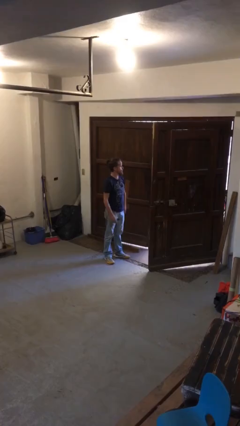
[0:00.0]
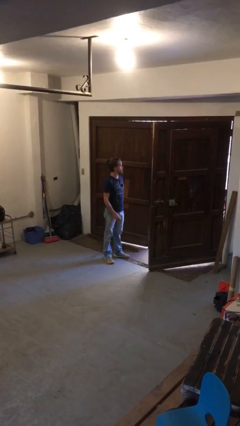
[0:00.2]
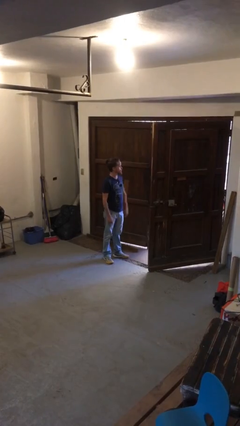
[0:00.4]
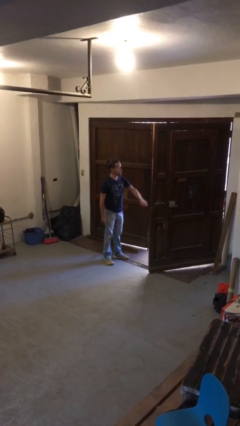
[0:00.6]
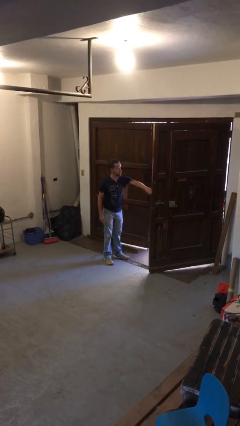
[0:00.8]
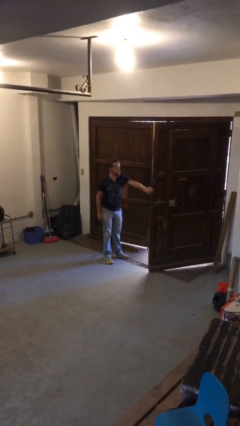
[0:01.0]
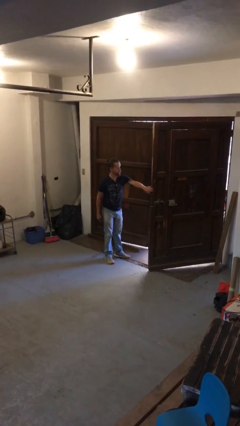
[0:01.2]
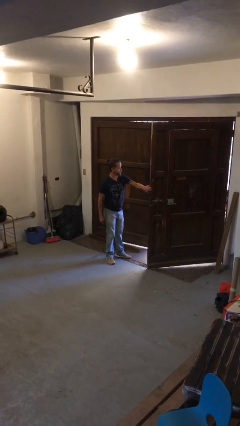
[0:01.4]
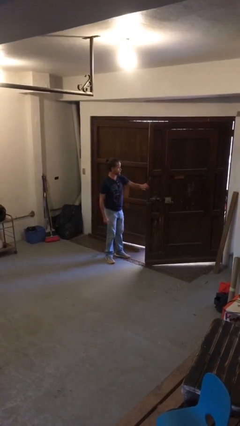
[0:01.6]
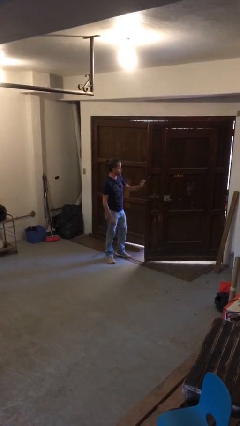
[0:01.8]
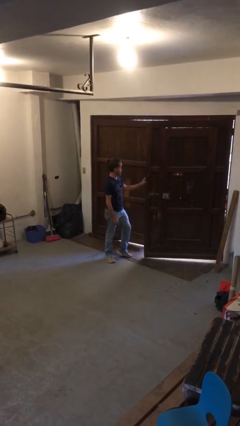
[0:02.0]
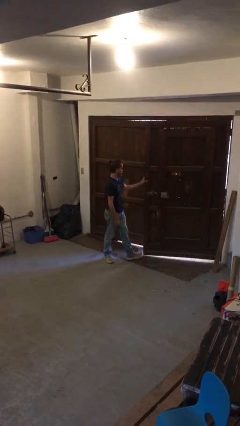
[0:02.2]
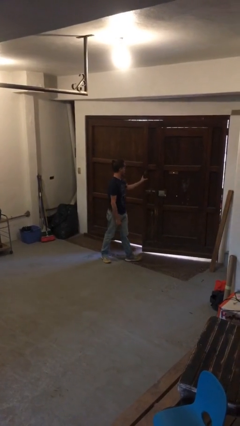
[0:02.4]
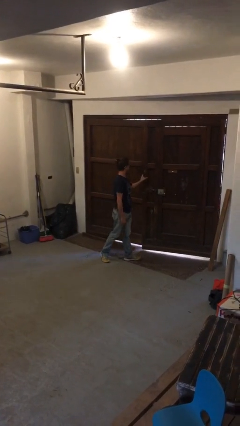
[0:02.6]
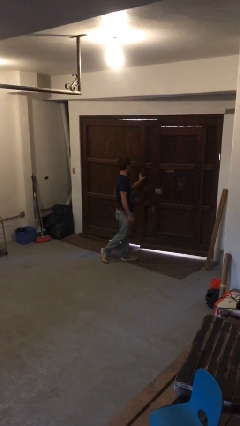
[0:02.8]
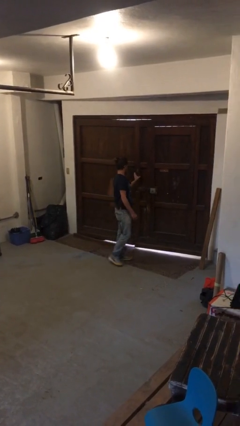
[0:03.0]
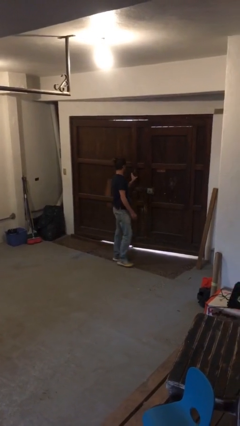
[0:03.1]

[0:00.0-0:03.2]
person closes gate

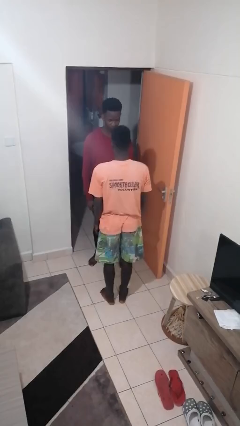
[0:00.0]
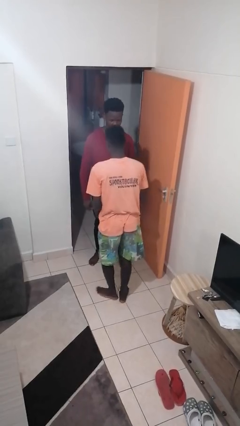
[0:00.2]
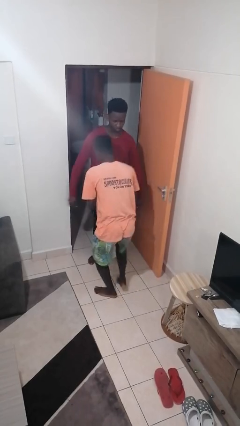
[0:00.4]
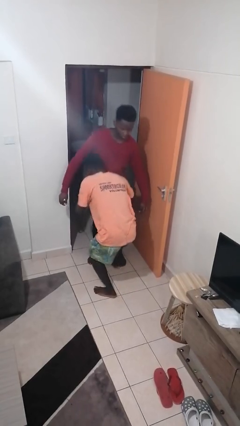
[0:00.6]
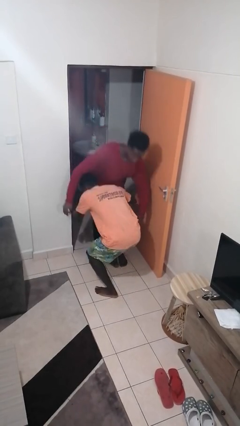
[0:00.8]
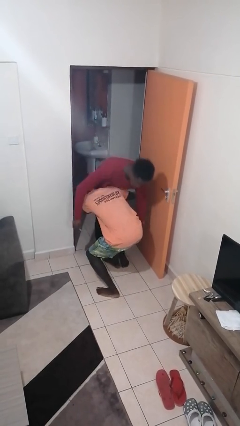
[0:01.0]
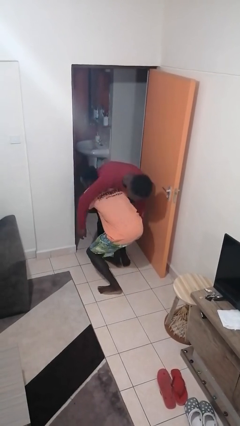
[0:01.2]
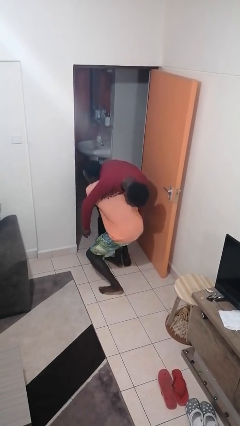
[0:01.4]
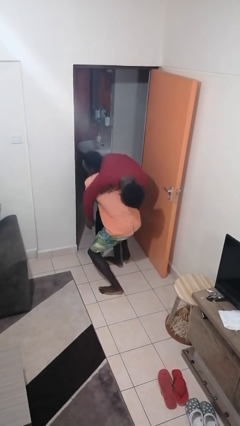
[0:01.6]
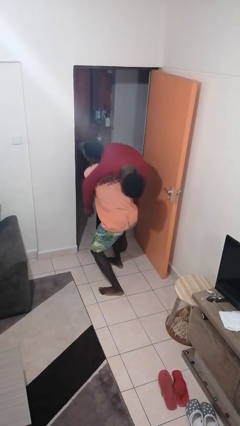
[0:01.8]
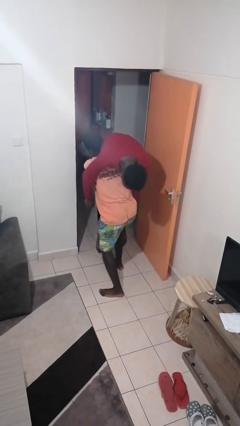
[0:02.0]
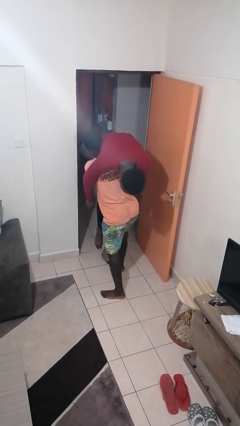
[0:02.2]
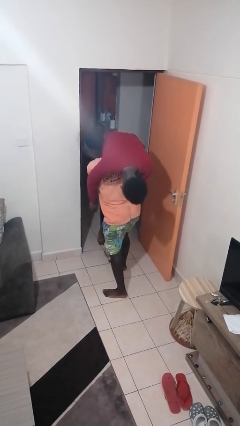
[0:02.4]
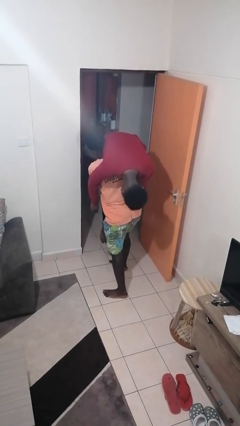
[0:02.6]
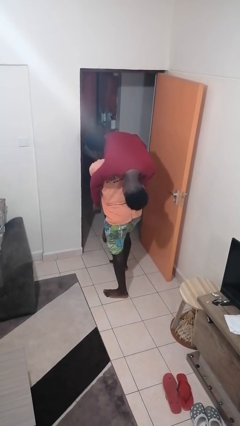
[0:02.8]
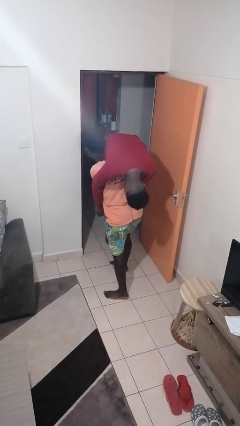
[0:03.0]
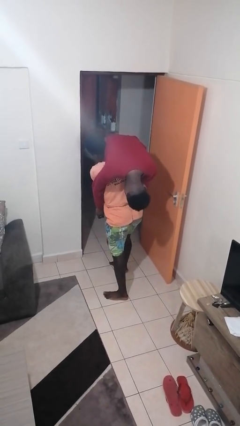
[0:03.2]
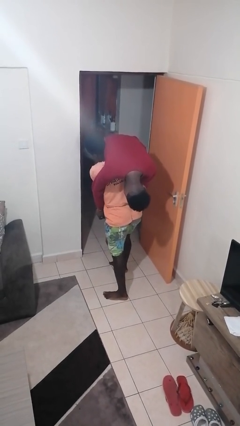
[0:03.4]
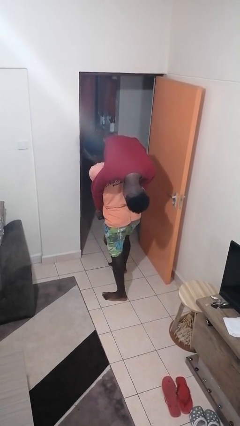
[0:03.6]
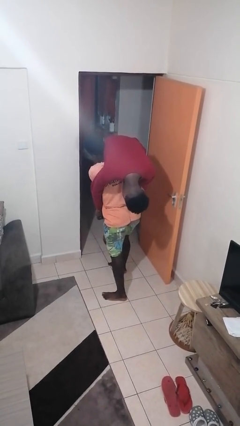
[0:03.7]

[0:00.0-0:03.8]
person carries person over shoulder

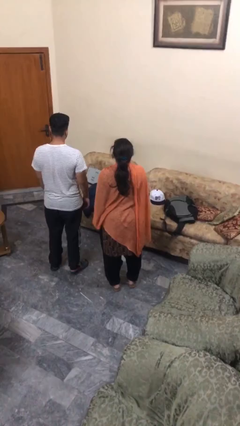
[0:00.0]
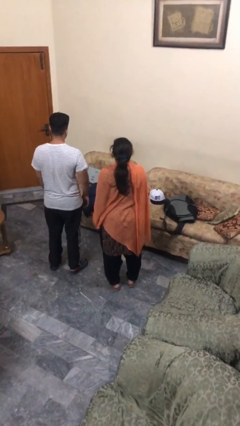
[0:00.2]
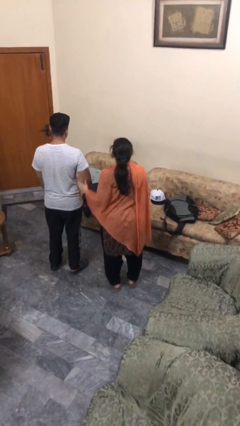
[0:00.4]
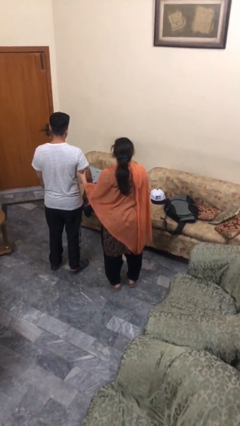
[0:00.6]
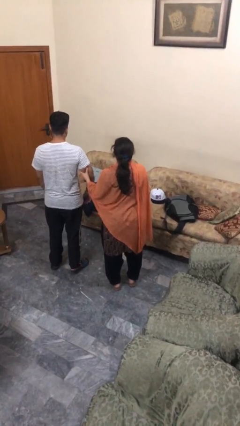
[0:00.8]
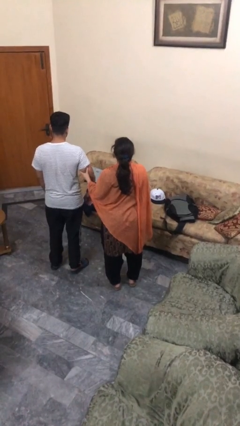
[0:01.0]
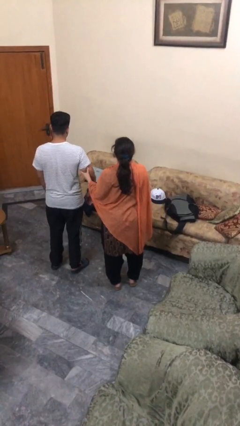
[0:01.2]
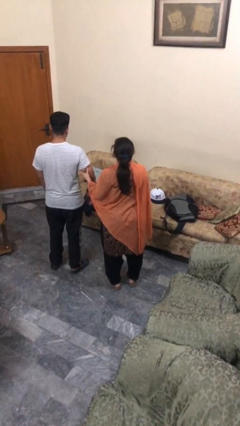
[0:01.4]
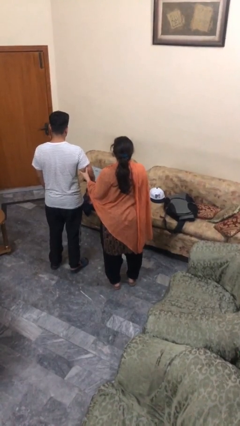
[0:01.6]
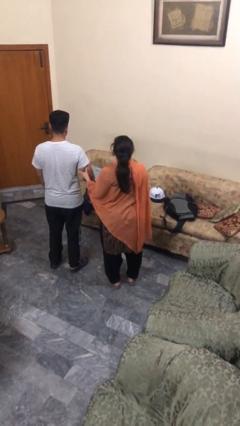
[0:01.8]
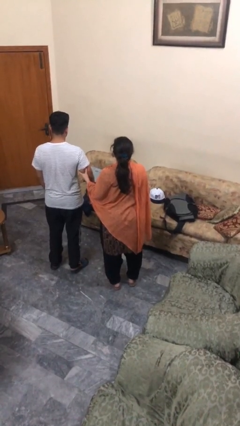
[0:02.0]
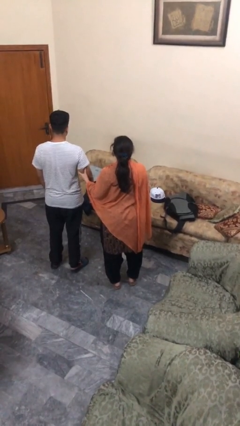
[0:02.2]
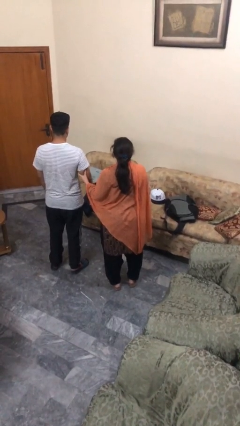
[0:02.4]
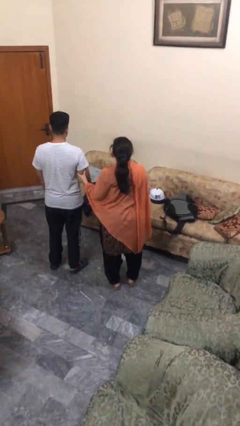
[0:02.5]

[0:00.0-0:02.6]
person grabs person by bicep

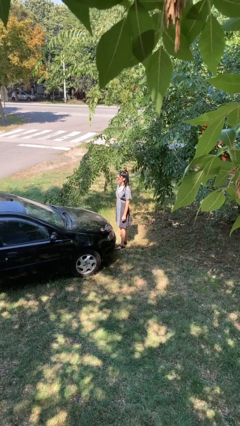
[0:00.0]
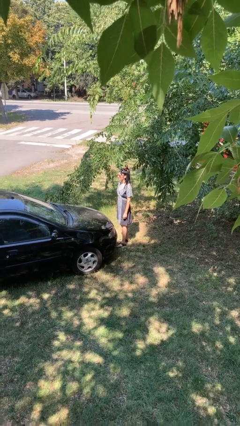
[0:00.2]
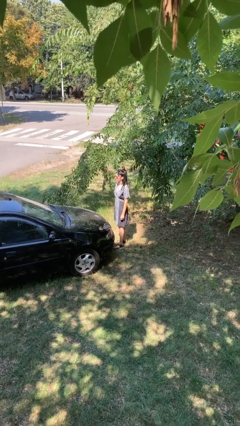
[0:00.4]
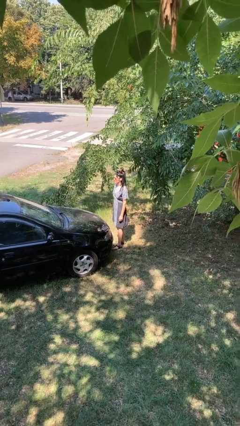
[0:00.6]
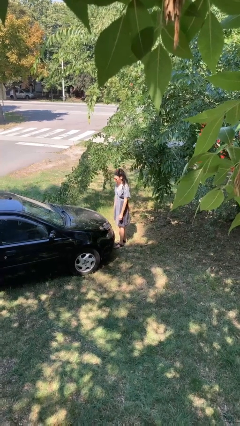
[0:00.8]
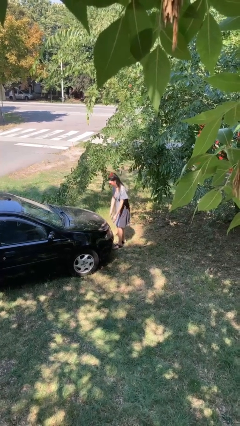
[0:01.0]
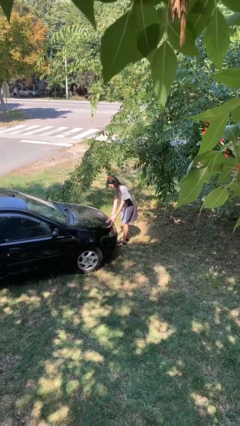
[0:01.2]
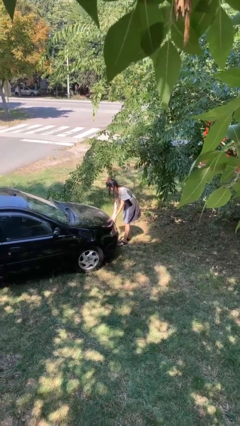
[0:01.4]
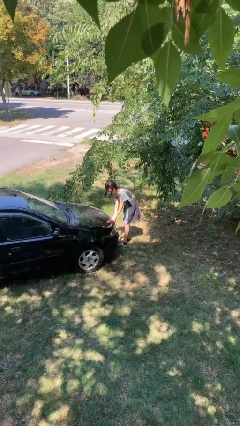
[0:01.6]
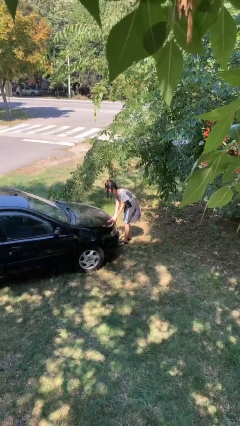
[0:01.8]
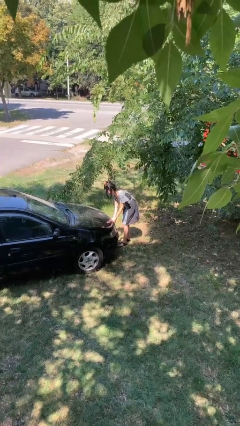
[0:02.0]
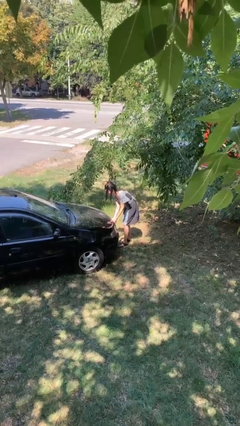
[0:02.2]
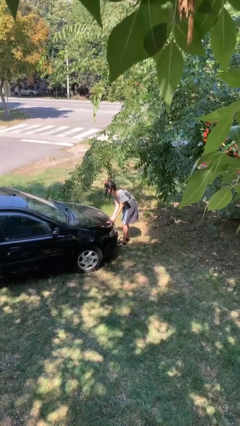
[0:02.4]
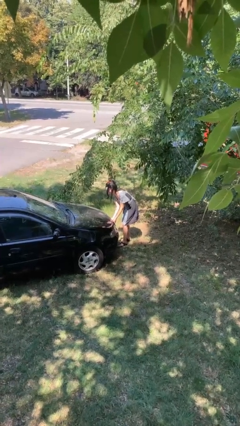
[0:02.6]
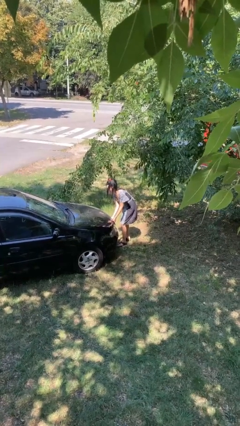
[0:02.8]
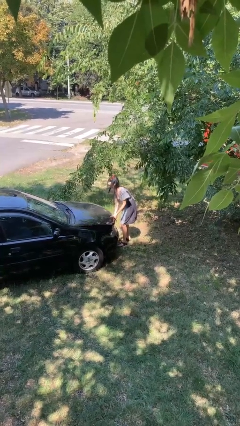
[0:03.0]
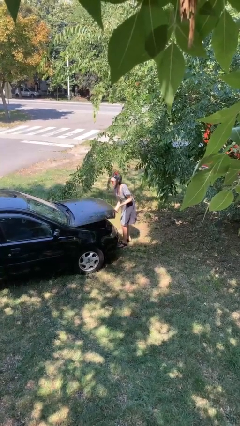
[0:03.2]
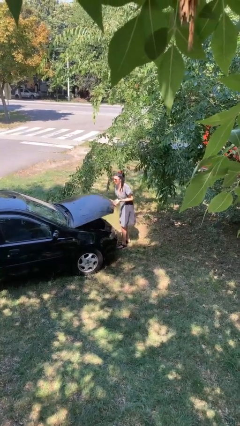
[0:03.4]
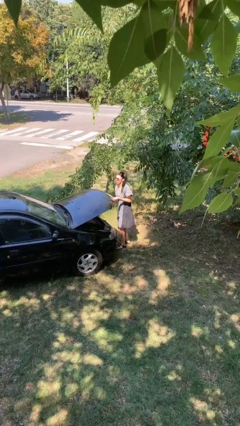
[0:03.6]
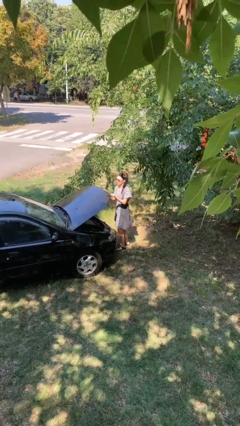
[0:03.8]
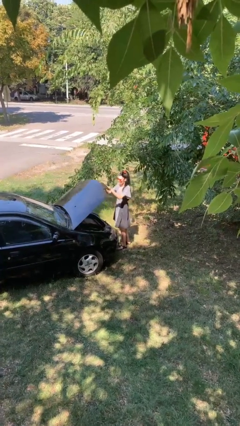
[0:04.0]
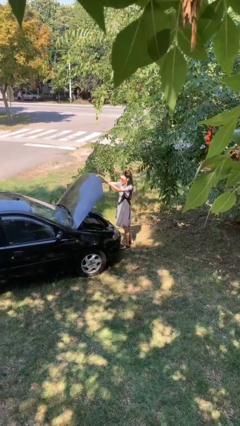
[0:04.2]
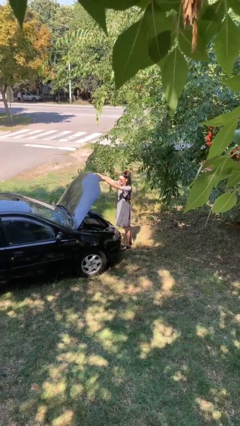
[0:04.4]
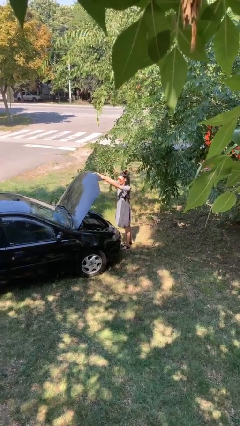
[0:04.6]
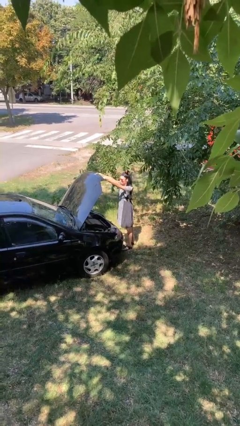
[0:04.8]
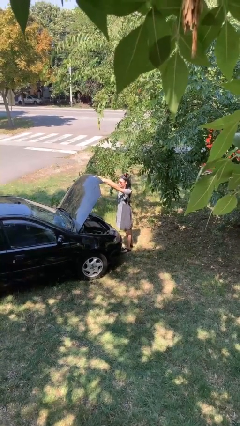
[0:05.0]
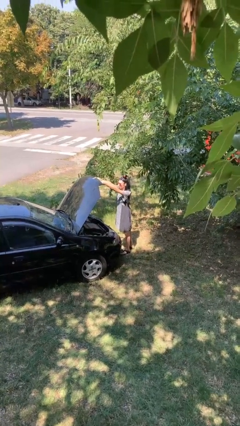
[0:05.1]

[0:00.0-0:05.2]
person opens car hood

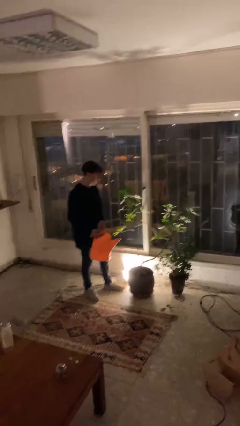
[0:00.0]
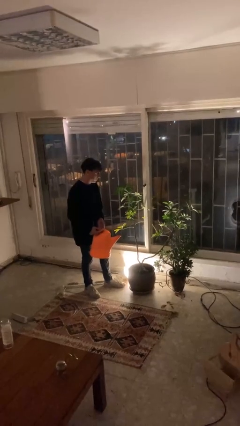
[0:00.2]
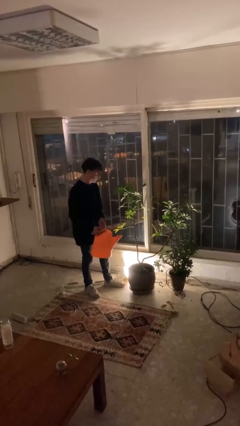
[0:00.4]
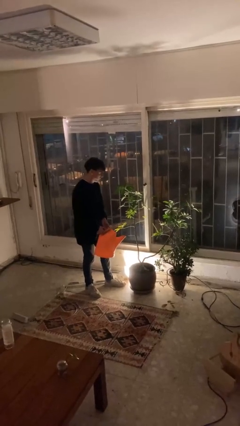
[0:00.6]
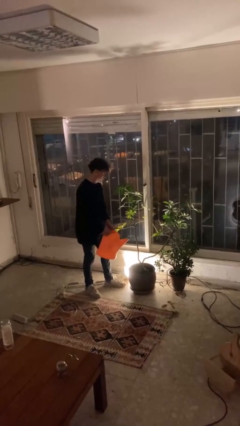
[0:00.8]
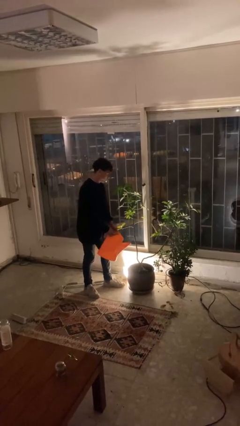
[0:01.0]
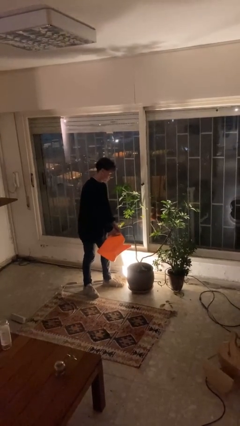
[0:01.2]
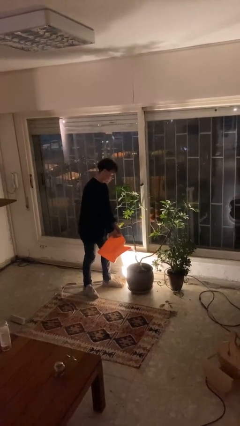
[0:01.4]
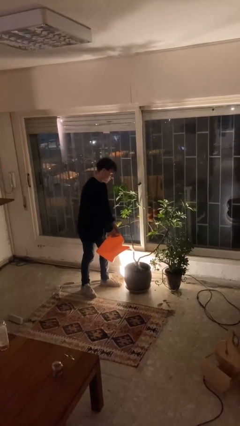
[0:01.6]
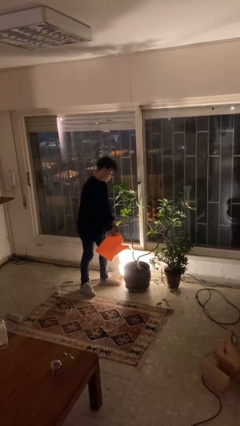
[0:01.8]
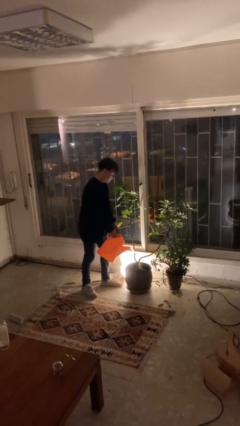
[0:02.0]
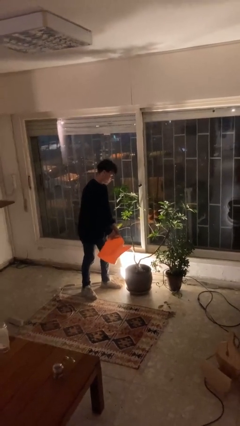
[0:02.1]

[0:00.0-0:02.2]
person waters houseplant

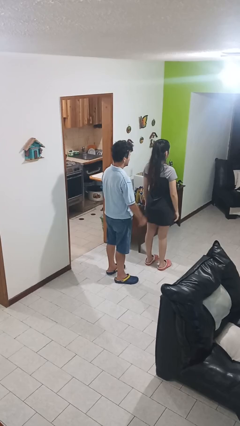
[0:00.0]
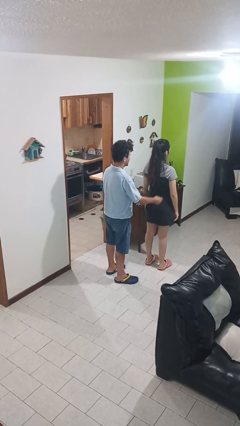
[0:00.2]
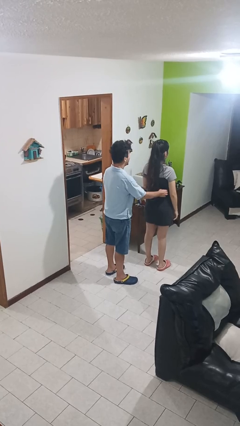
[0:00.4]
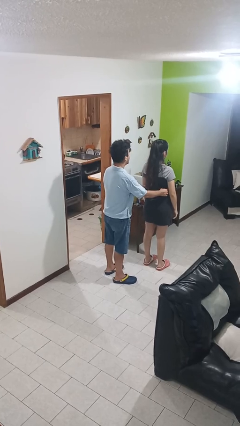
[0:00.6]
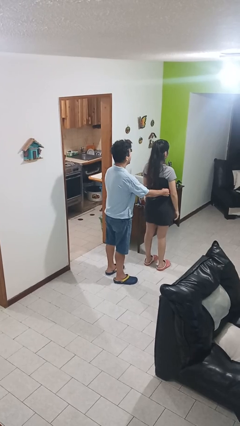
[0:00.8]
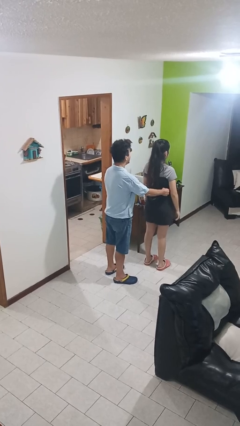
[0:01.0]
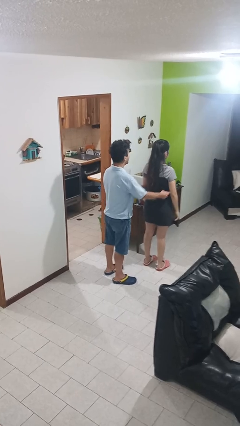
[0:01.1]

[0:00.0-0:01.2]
person tickles person
